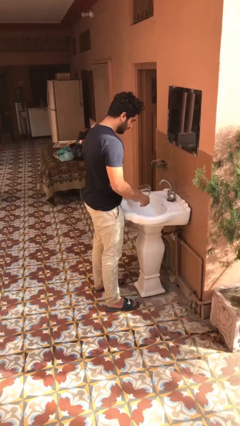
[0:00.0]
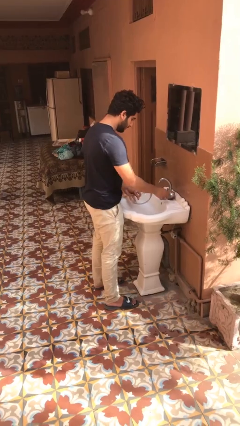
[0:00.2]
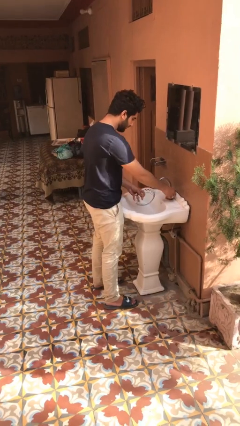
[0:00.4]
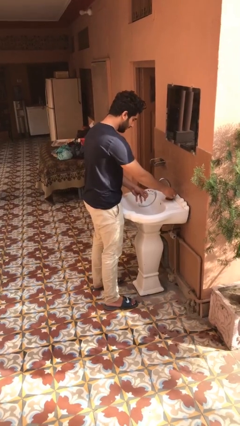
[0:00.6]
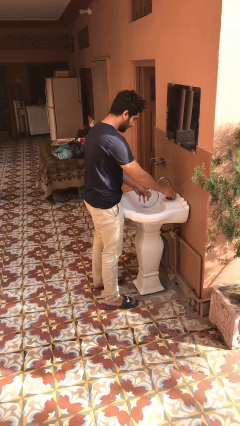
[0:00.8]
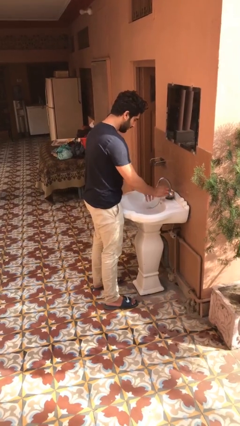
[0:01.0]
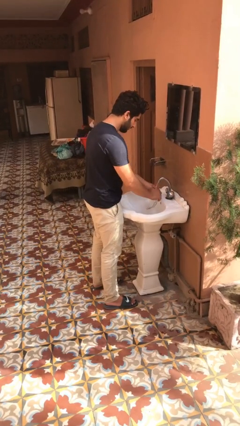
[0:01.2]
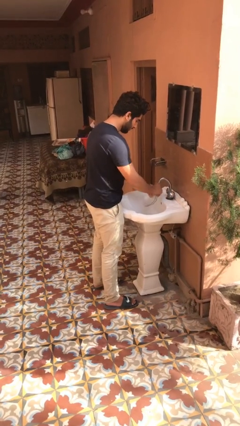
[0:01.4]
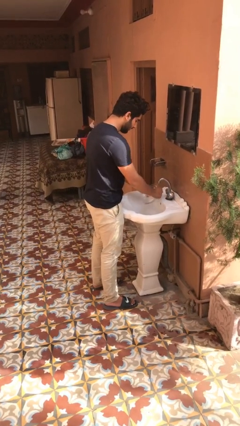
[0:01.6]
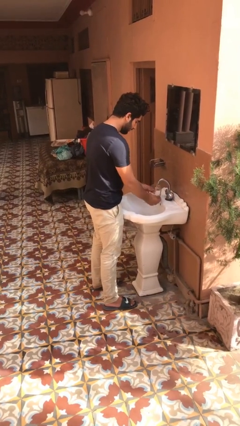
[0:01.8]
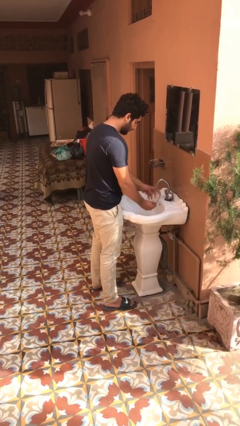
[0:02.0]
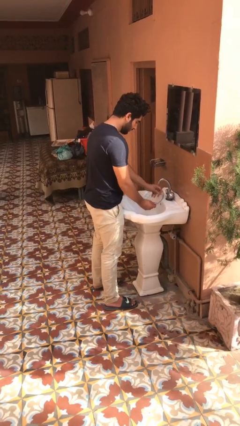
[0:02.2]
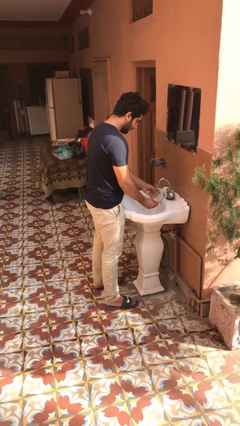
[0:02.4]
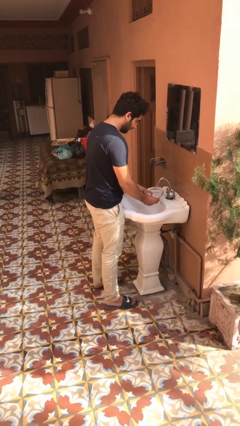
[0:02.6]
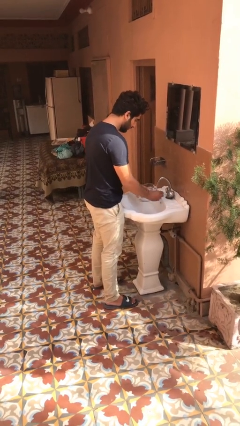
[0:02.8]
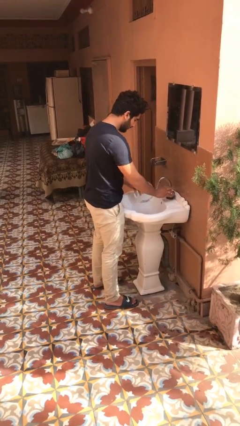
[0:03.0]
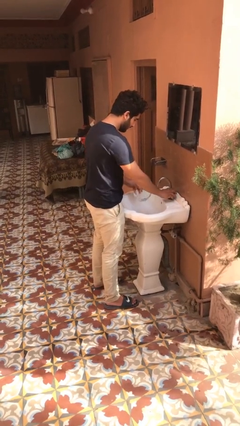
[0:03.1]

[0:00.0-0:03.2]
person washes dish

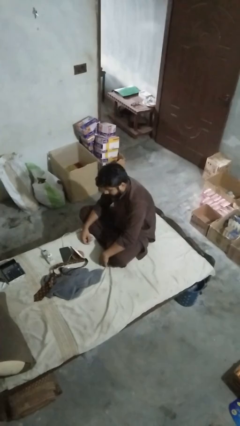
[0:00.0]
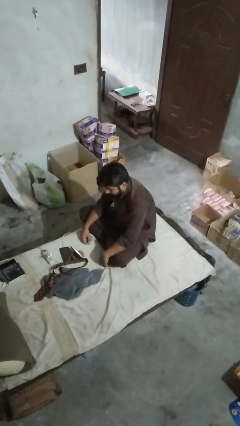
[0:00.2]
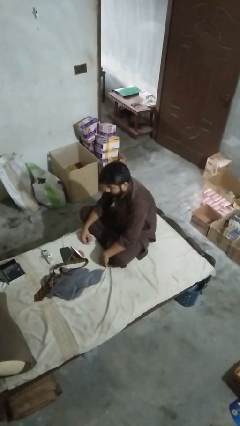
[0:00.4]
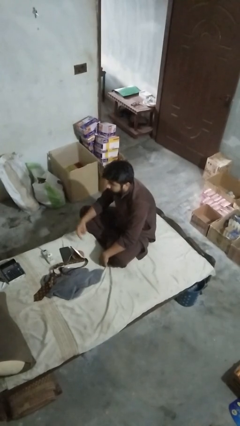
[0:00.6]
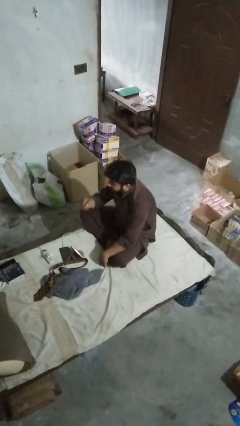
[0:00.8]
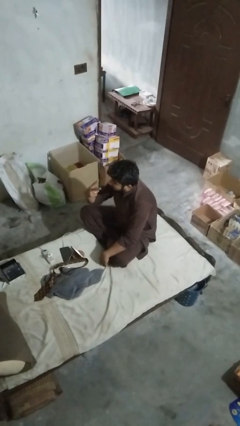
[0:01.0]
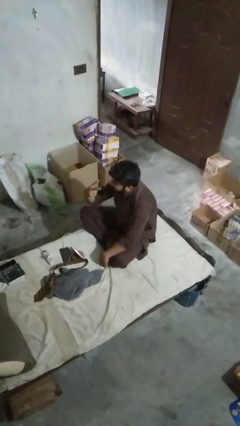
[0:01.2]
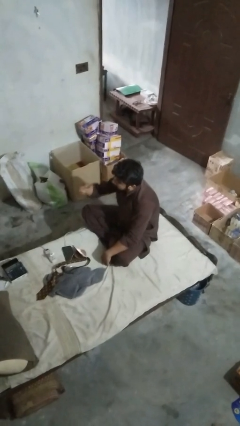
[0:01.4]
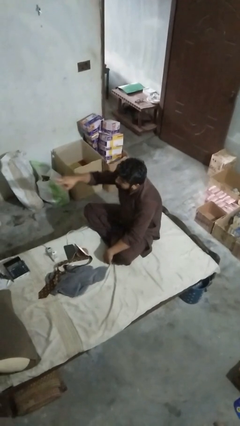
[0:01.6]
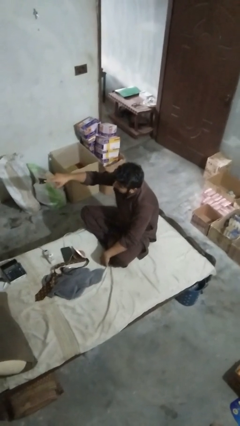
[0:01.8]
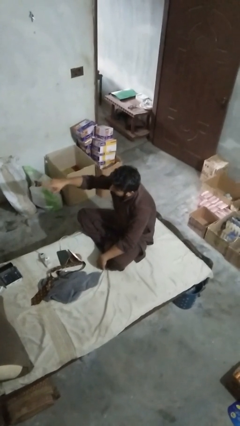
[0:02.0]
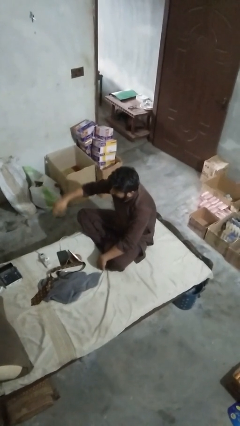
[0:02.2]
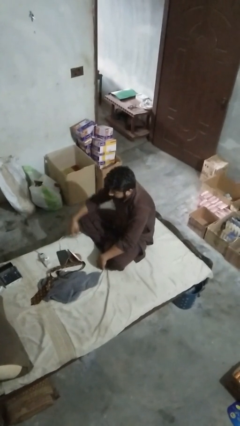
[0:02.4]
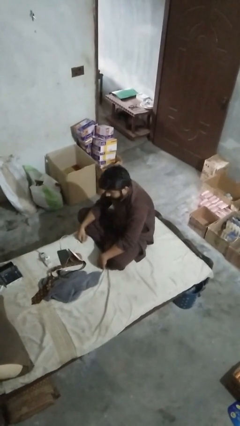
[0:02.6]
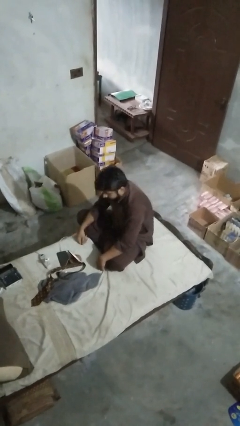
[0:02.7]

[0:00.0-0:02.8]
person gestures watch closely

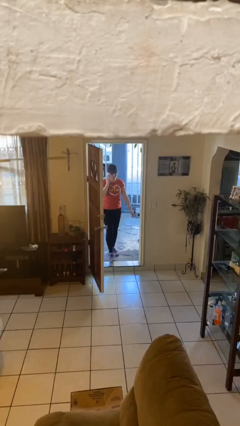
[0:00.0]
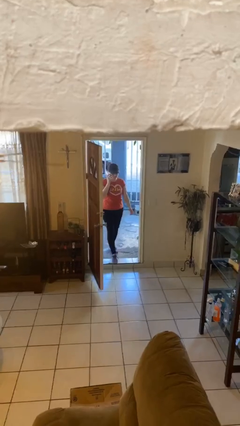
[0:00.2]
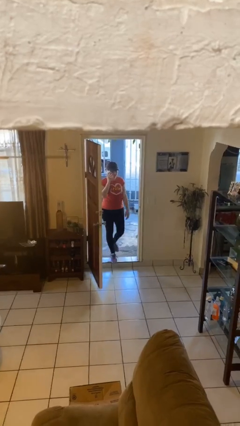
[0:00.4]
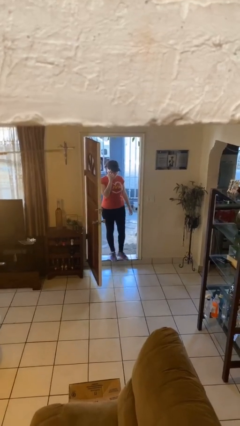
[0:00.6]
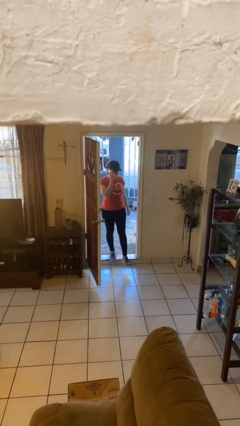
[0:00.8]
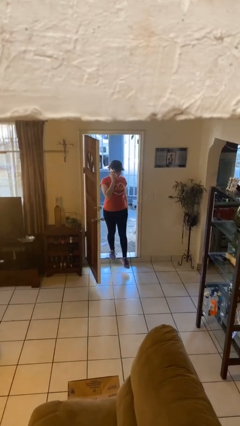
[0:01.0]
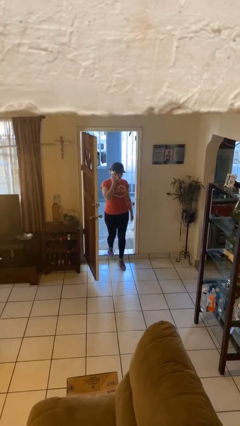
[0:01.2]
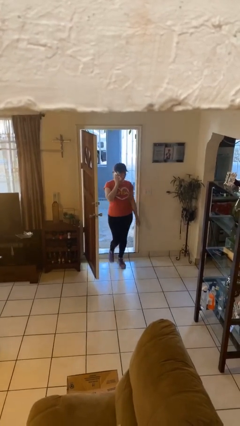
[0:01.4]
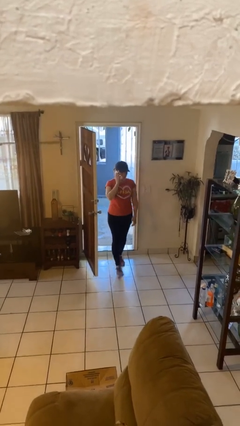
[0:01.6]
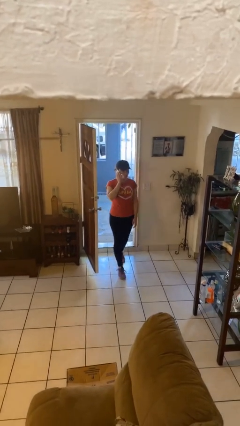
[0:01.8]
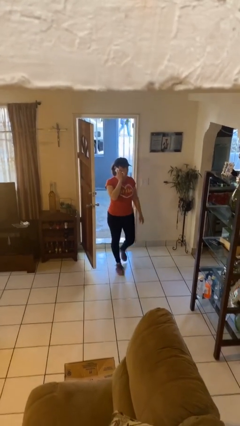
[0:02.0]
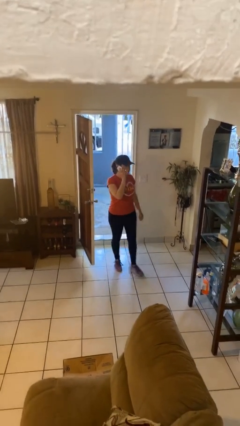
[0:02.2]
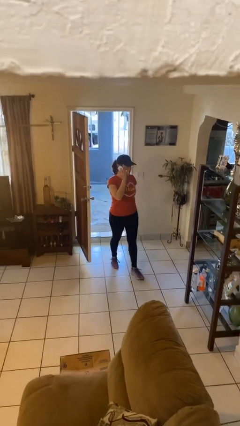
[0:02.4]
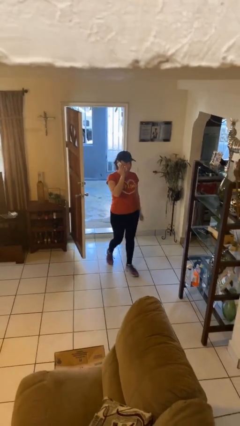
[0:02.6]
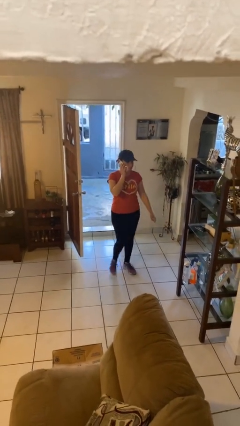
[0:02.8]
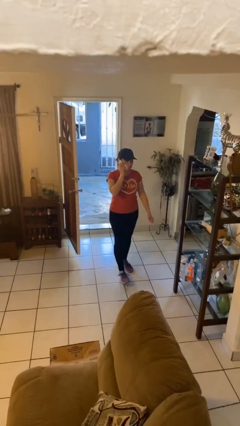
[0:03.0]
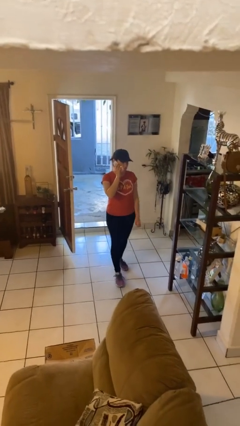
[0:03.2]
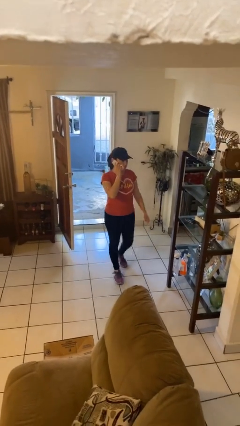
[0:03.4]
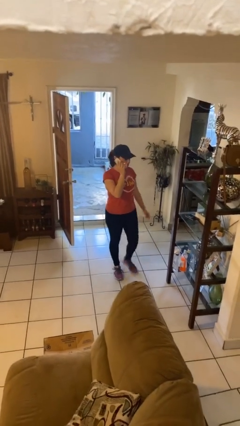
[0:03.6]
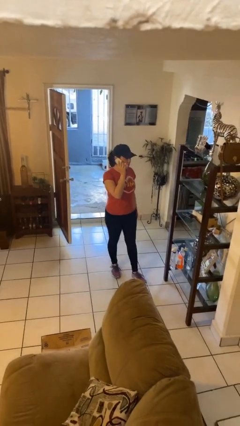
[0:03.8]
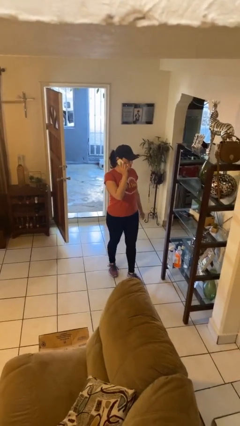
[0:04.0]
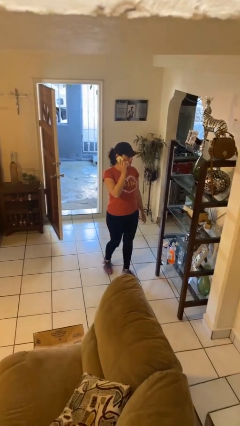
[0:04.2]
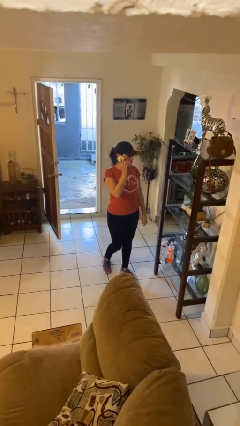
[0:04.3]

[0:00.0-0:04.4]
person enters scene through structure

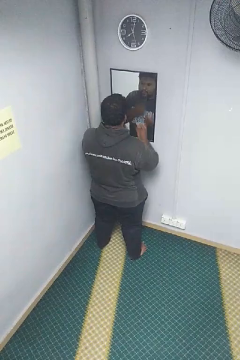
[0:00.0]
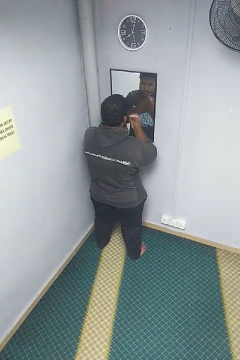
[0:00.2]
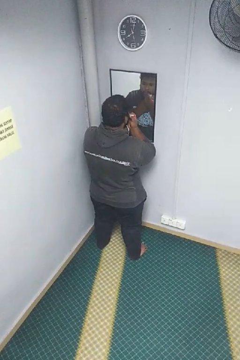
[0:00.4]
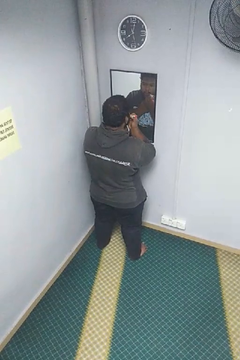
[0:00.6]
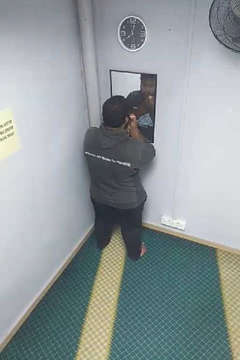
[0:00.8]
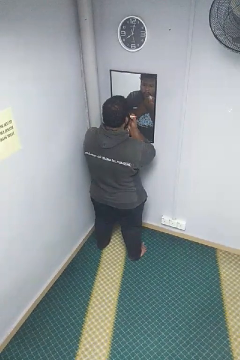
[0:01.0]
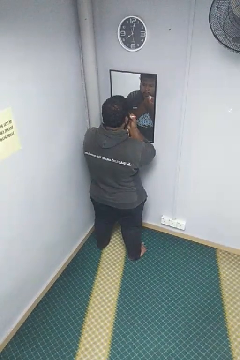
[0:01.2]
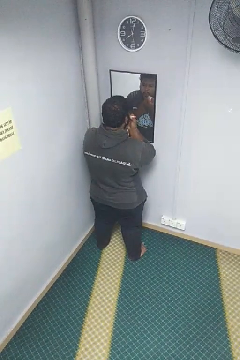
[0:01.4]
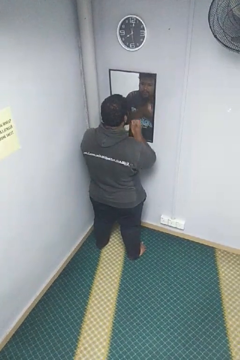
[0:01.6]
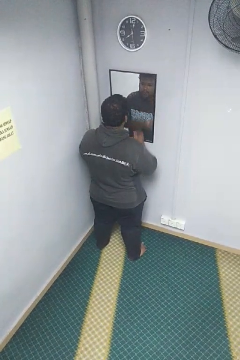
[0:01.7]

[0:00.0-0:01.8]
person applies lip makeup

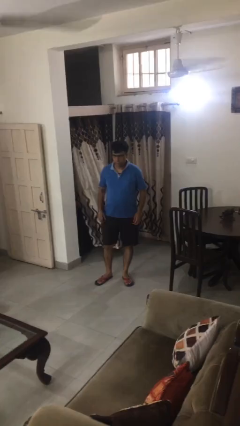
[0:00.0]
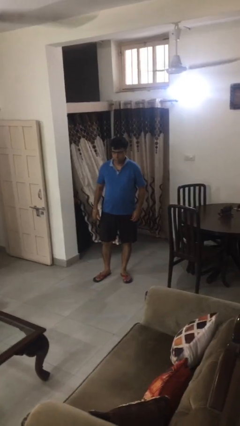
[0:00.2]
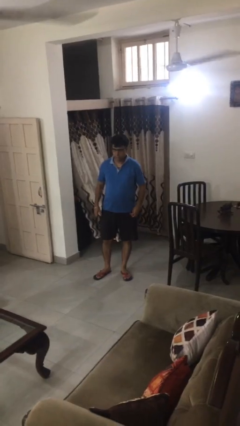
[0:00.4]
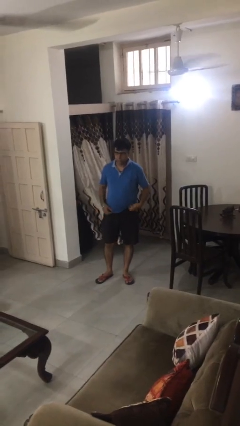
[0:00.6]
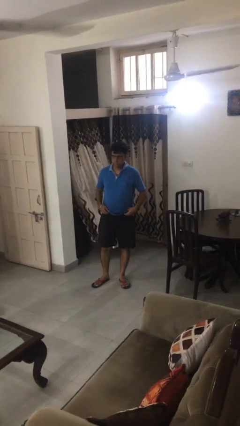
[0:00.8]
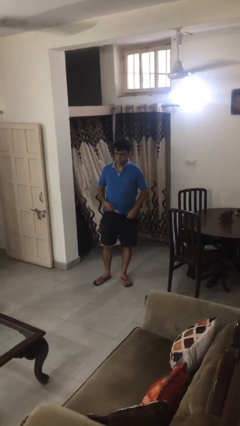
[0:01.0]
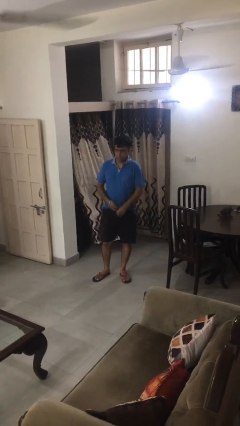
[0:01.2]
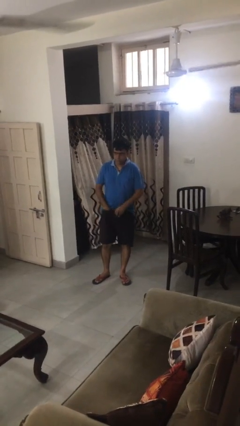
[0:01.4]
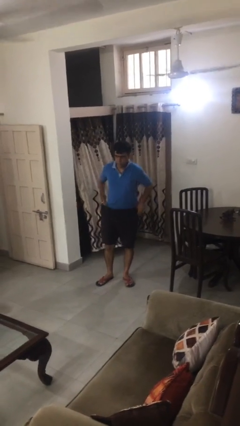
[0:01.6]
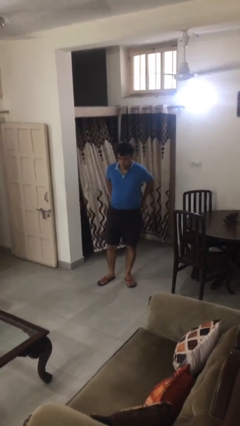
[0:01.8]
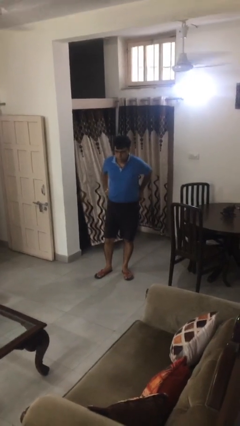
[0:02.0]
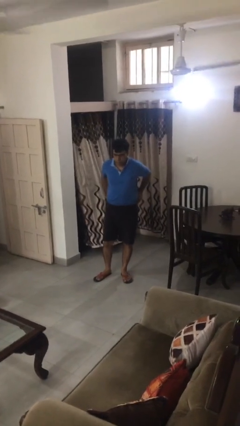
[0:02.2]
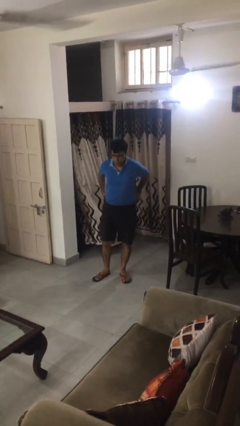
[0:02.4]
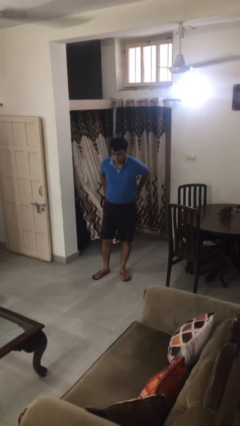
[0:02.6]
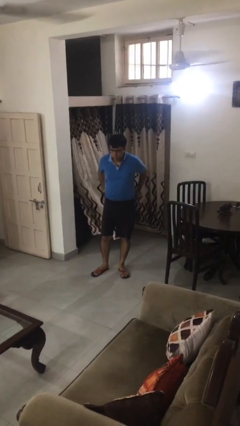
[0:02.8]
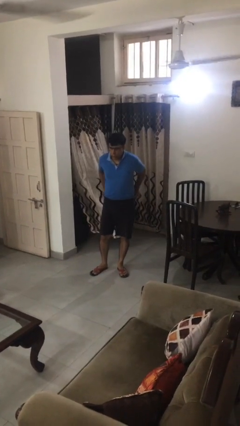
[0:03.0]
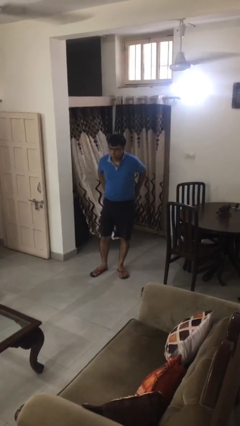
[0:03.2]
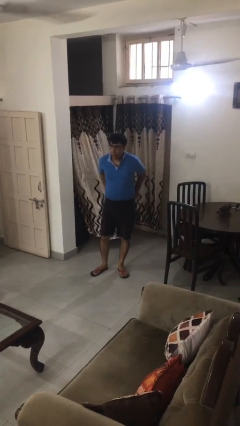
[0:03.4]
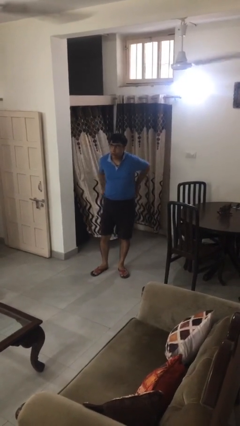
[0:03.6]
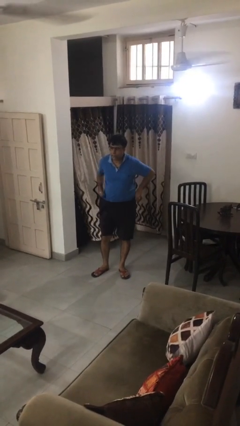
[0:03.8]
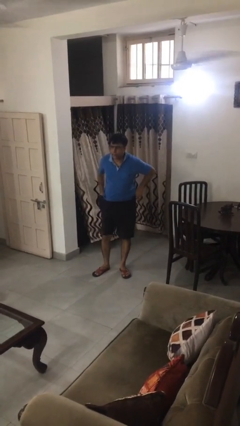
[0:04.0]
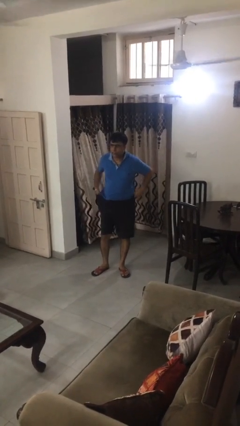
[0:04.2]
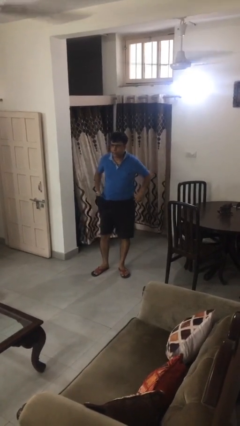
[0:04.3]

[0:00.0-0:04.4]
person tucks in shirt

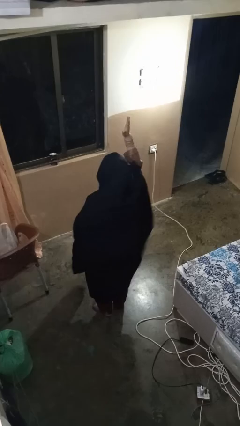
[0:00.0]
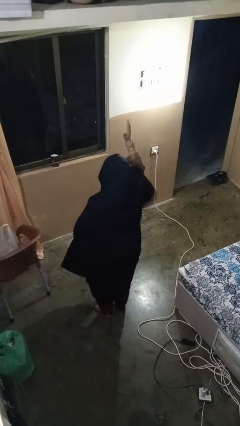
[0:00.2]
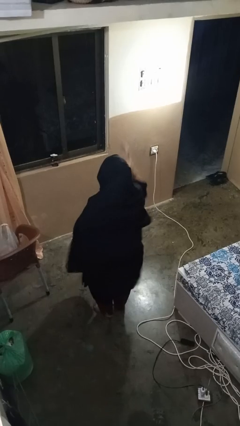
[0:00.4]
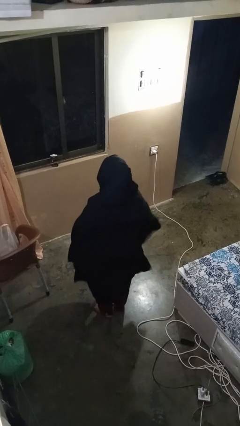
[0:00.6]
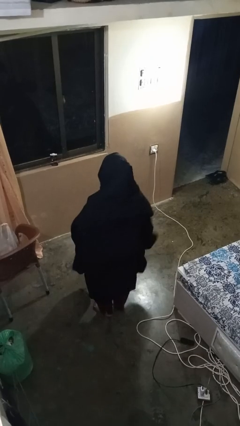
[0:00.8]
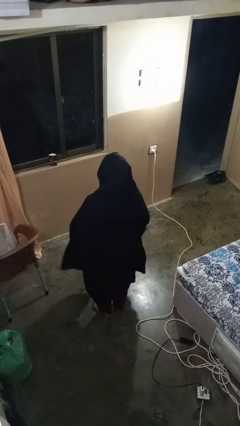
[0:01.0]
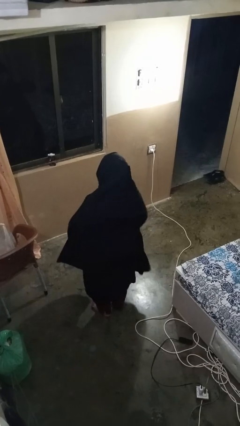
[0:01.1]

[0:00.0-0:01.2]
person gestures lower hand
